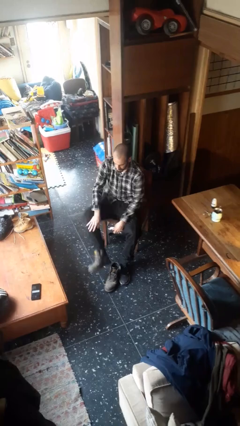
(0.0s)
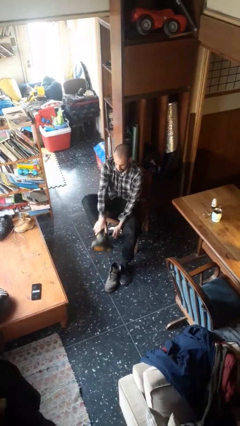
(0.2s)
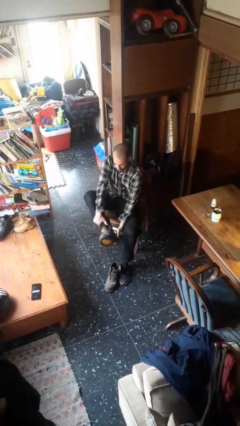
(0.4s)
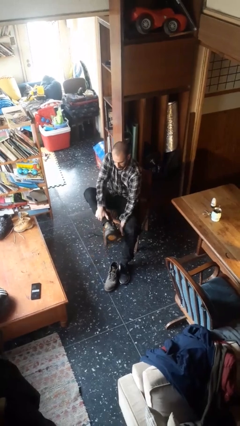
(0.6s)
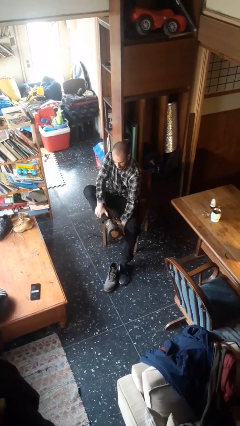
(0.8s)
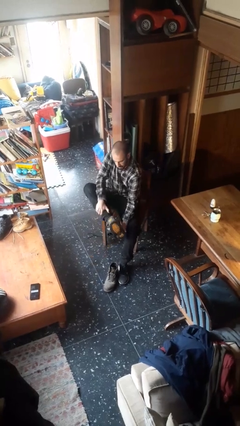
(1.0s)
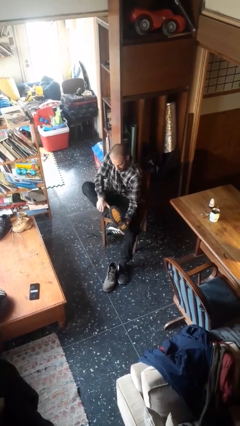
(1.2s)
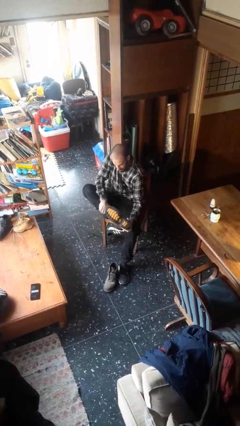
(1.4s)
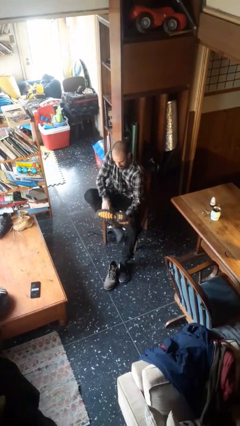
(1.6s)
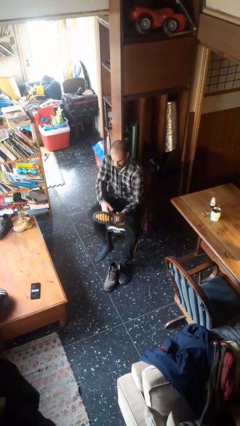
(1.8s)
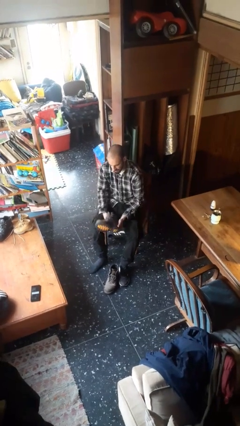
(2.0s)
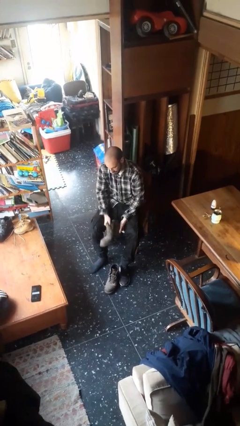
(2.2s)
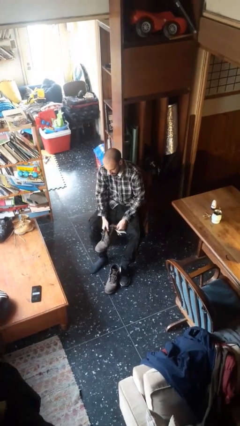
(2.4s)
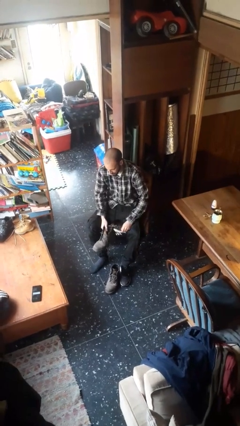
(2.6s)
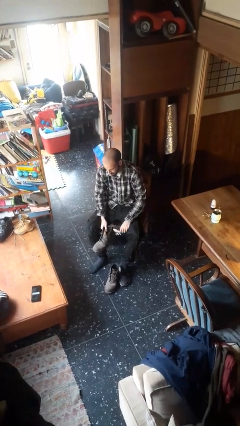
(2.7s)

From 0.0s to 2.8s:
person takes off boots

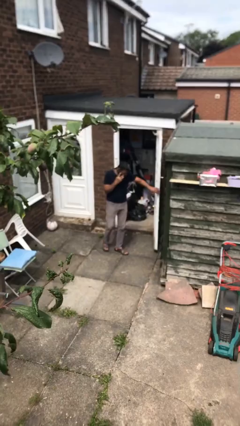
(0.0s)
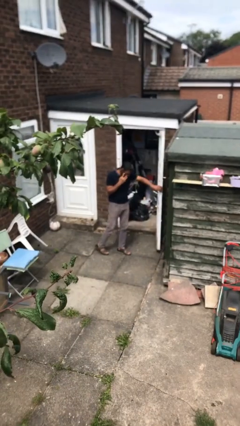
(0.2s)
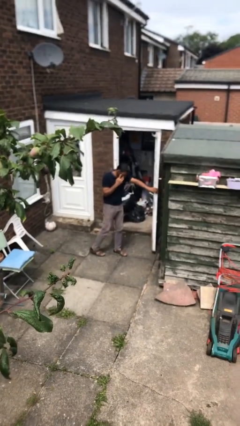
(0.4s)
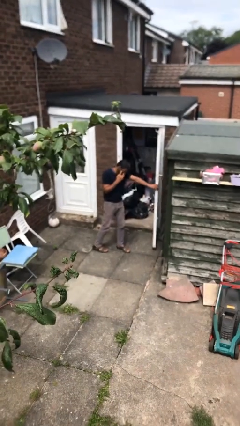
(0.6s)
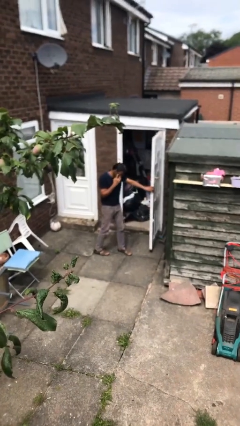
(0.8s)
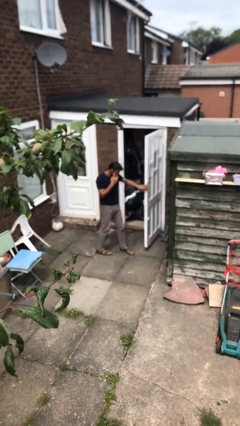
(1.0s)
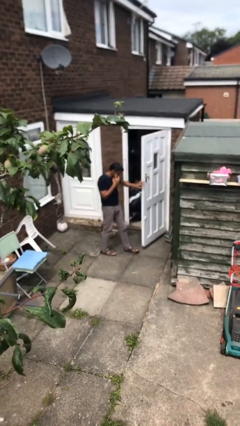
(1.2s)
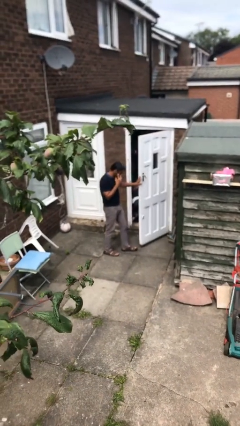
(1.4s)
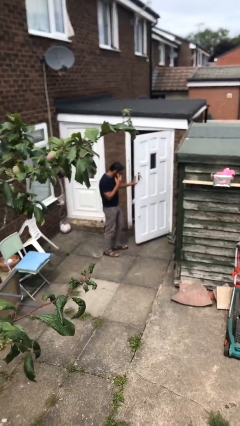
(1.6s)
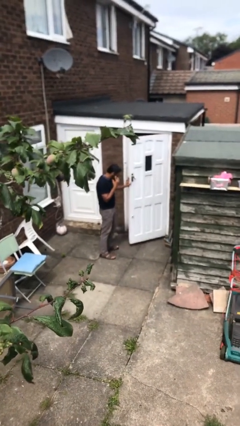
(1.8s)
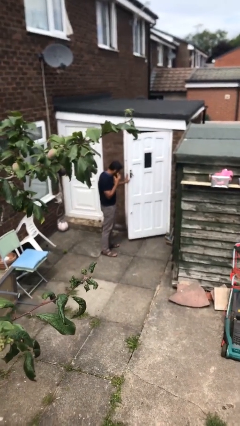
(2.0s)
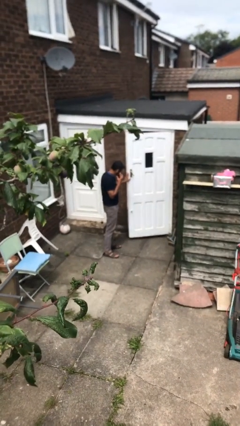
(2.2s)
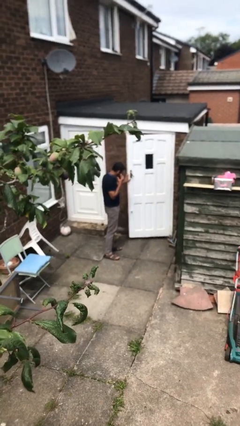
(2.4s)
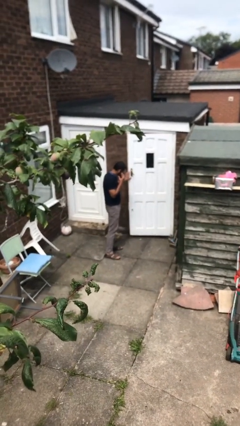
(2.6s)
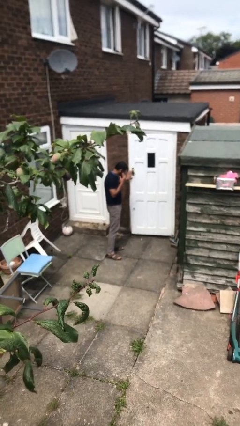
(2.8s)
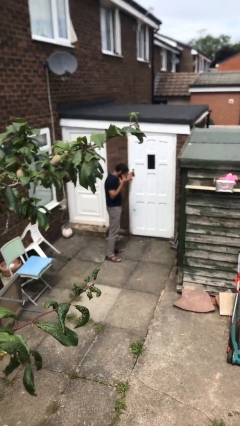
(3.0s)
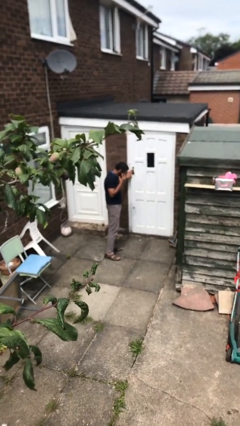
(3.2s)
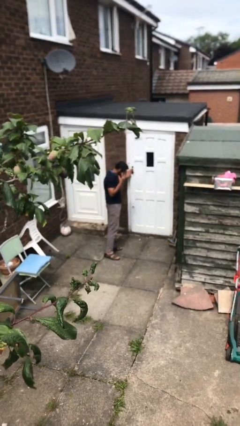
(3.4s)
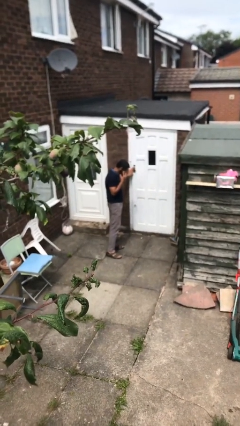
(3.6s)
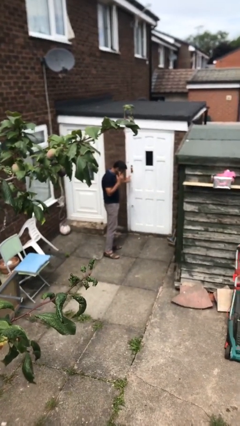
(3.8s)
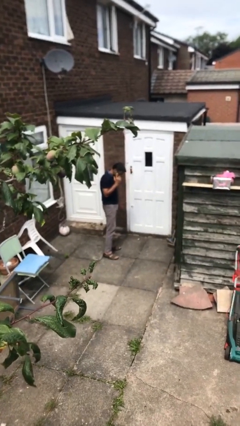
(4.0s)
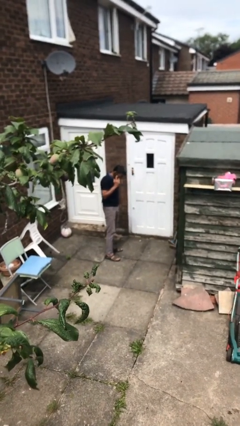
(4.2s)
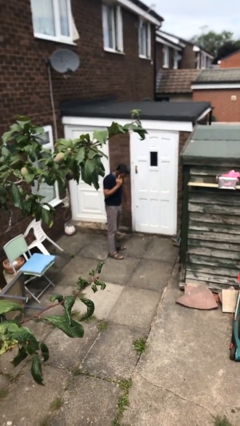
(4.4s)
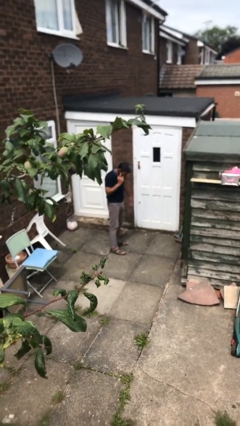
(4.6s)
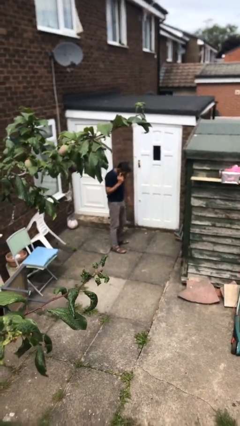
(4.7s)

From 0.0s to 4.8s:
person closes facility door

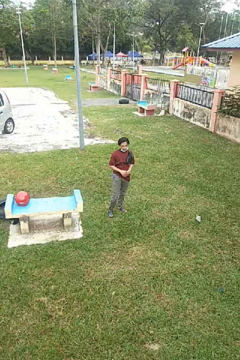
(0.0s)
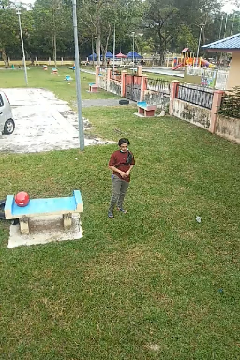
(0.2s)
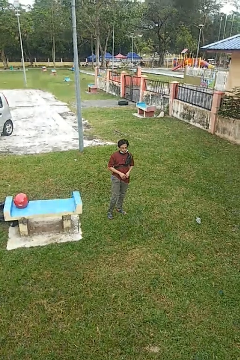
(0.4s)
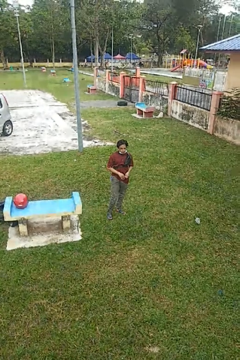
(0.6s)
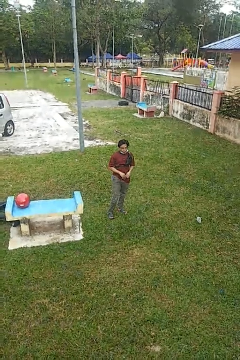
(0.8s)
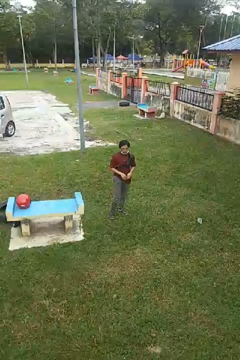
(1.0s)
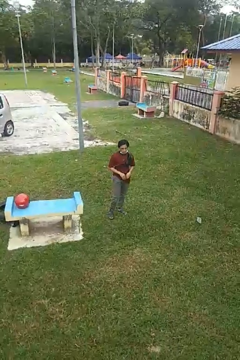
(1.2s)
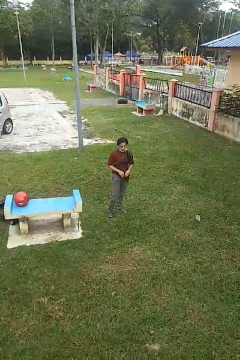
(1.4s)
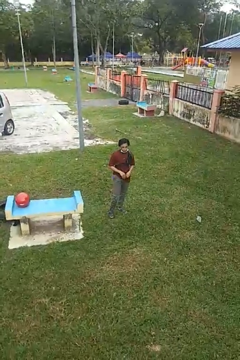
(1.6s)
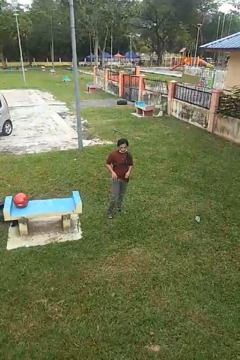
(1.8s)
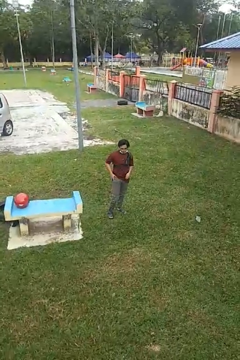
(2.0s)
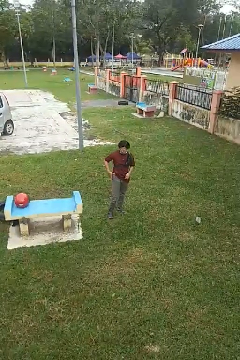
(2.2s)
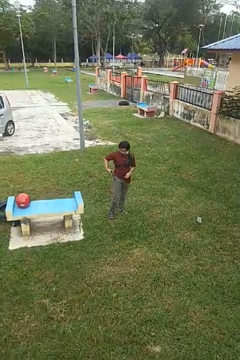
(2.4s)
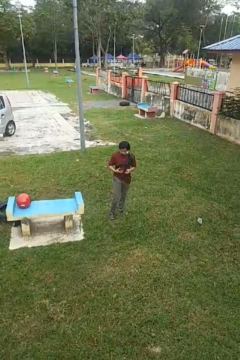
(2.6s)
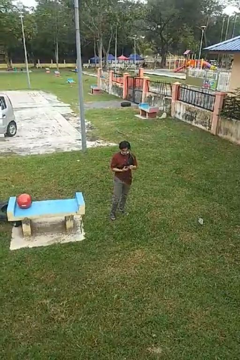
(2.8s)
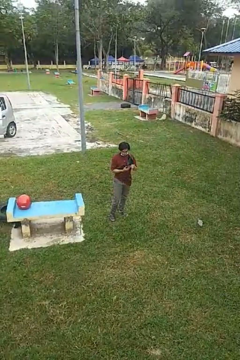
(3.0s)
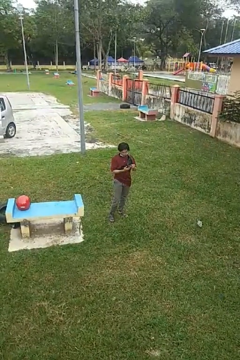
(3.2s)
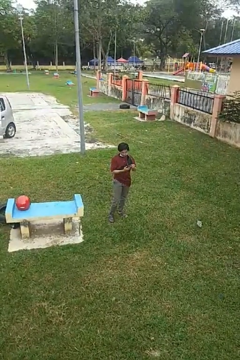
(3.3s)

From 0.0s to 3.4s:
person takes phone from pocket

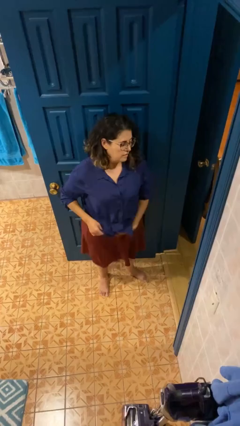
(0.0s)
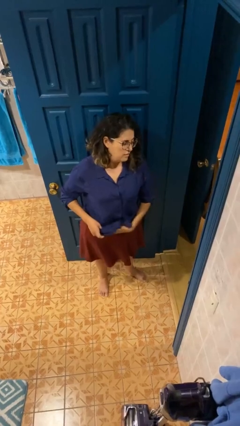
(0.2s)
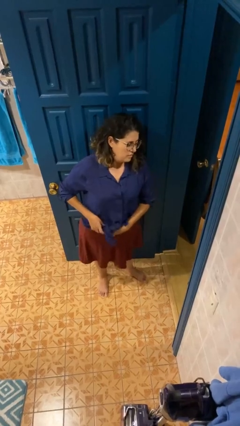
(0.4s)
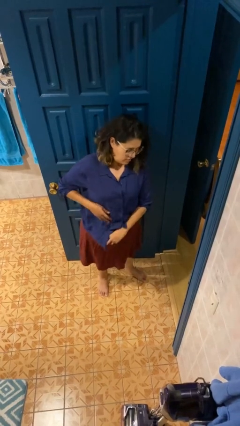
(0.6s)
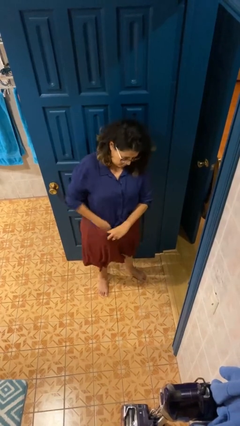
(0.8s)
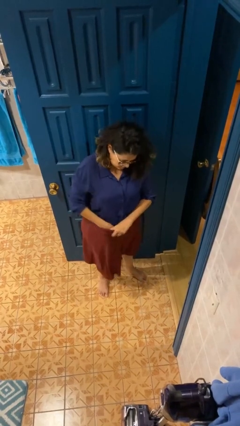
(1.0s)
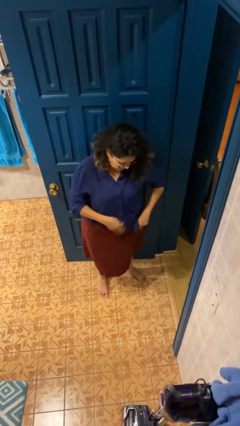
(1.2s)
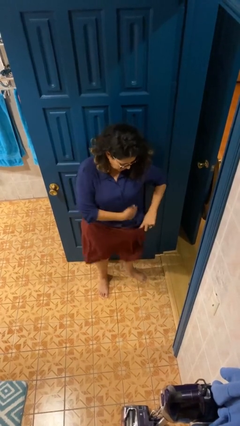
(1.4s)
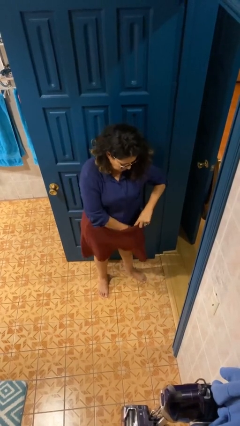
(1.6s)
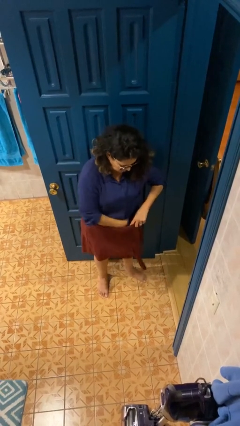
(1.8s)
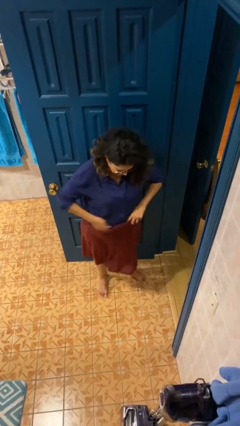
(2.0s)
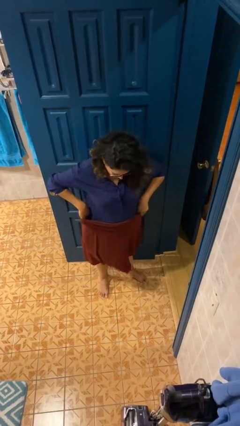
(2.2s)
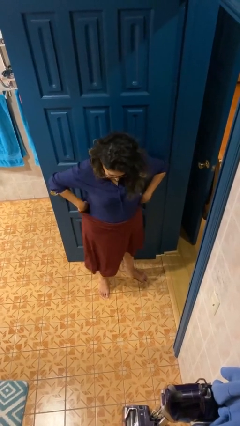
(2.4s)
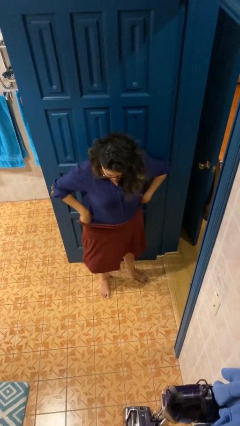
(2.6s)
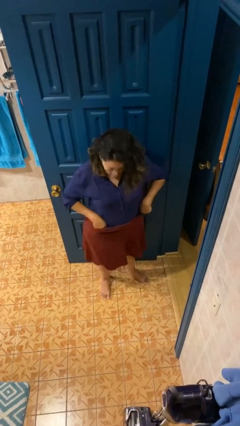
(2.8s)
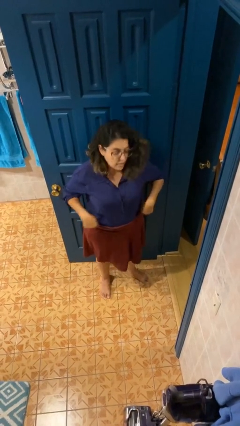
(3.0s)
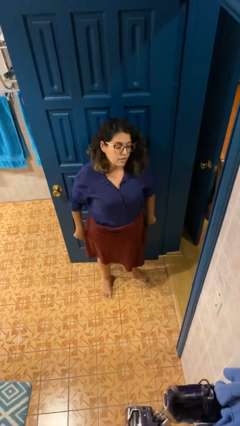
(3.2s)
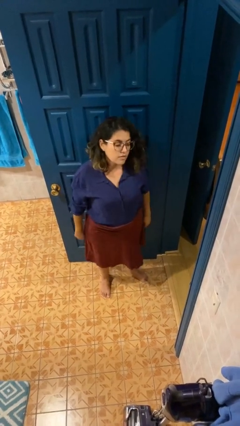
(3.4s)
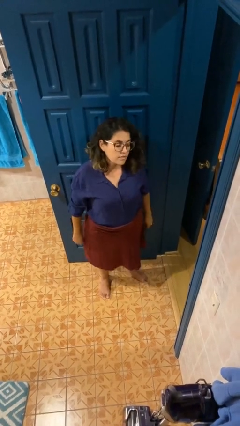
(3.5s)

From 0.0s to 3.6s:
person tucks in shirt

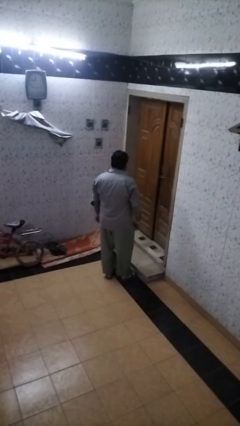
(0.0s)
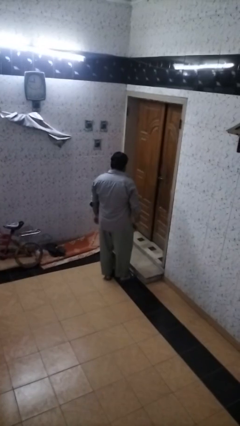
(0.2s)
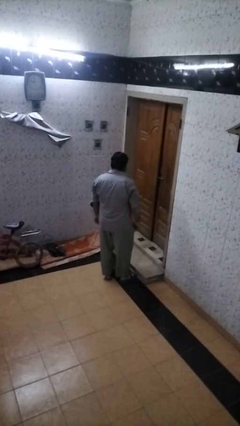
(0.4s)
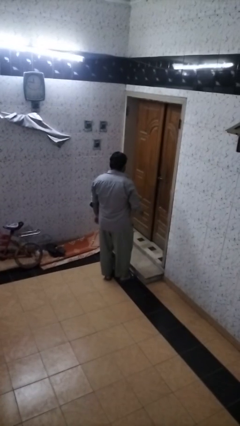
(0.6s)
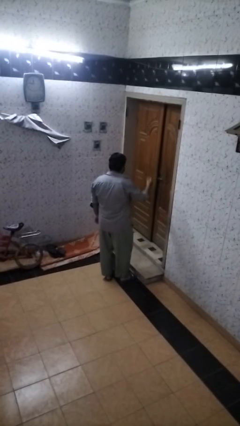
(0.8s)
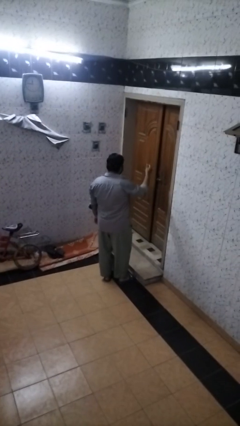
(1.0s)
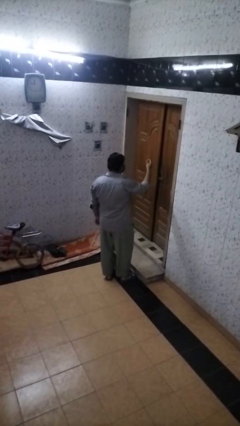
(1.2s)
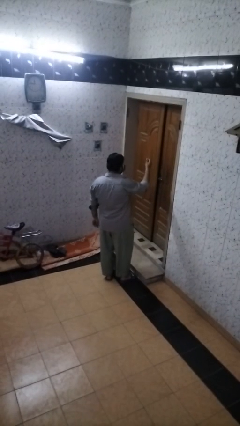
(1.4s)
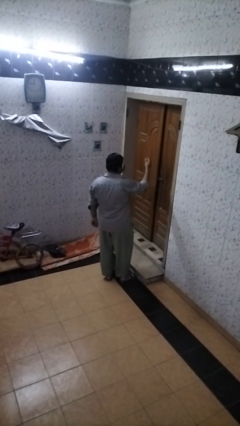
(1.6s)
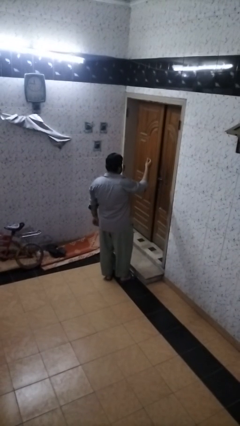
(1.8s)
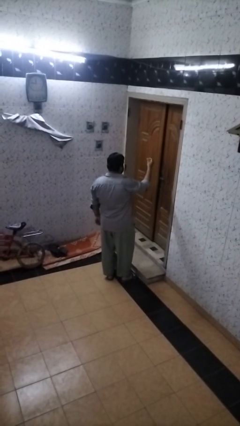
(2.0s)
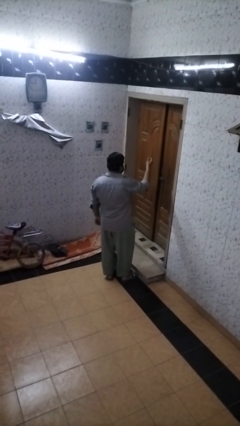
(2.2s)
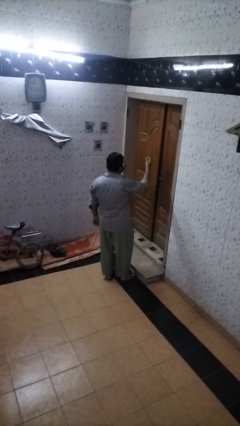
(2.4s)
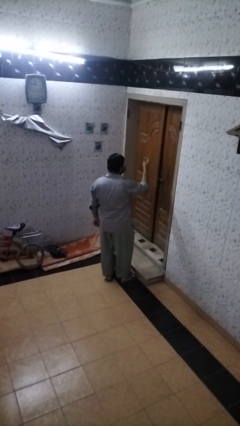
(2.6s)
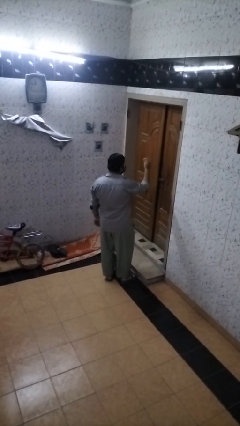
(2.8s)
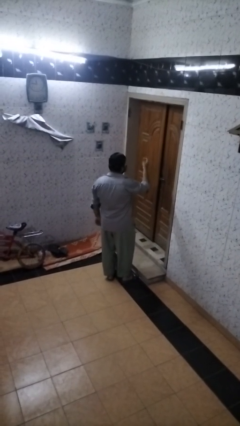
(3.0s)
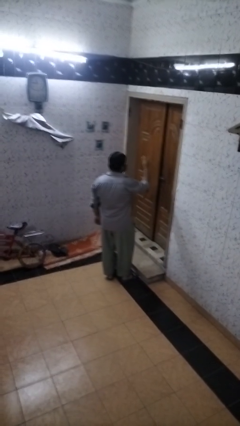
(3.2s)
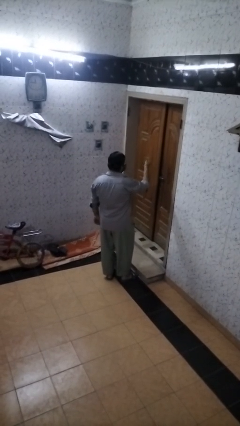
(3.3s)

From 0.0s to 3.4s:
person snaps fingers
